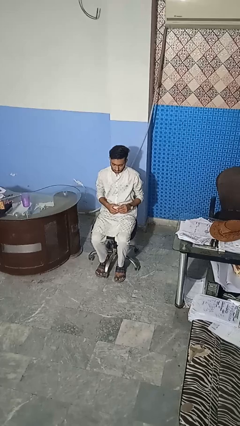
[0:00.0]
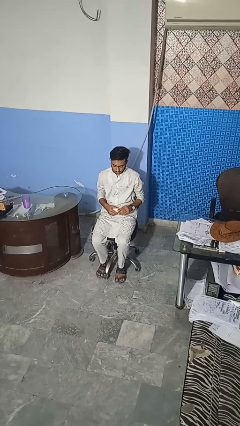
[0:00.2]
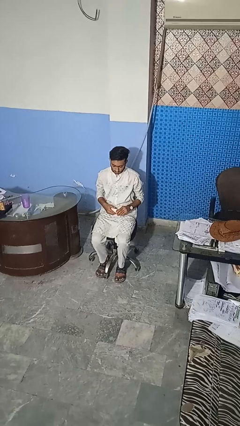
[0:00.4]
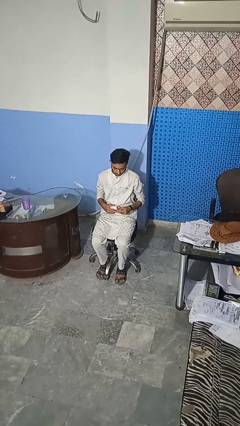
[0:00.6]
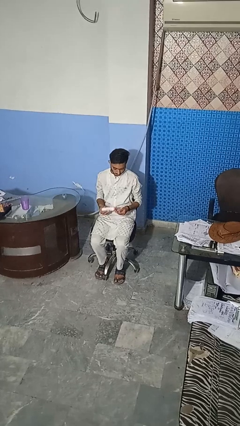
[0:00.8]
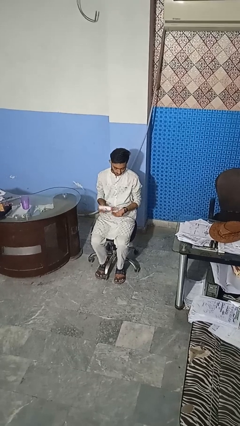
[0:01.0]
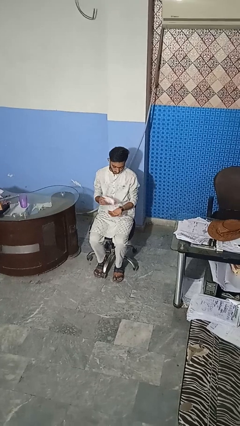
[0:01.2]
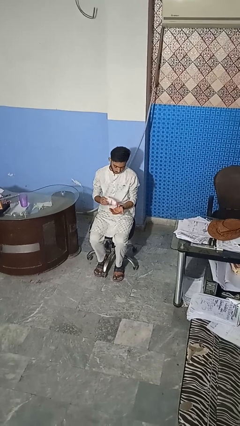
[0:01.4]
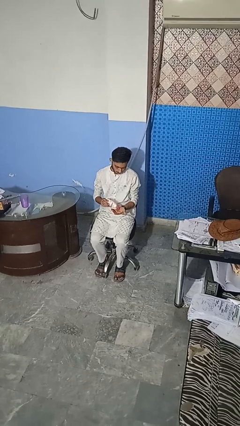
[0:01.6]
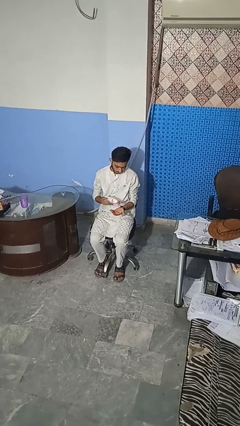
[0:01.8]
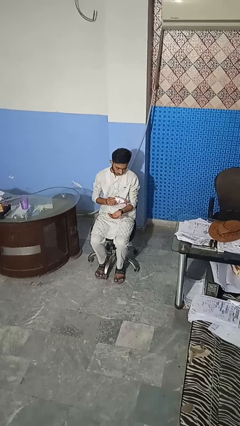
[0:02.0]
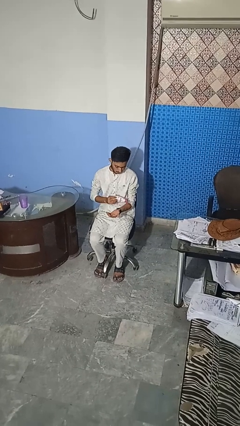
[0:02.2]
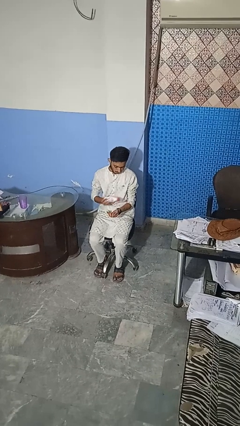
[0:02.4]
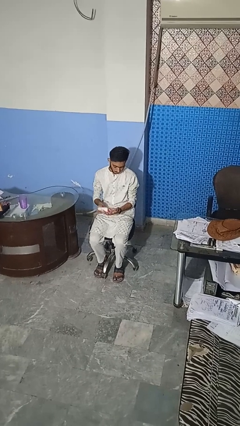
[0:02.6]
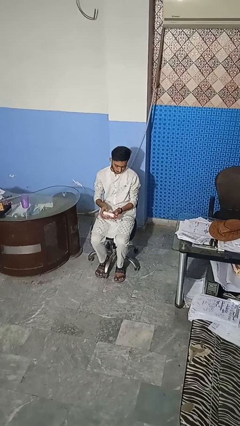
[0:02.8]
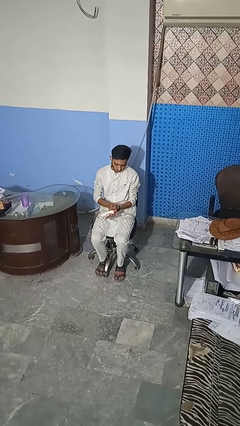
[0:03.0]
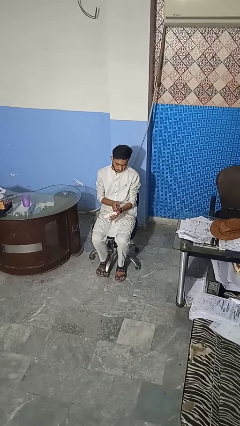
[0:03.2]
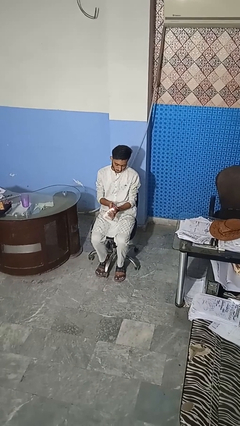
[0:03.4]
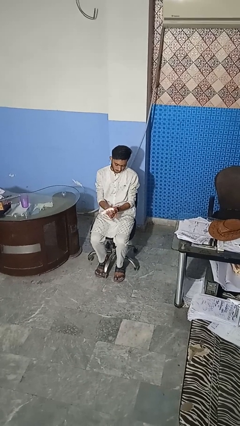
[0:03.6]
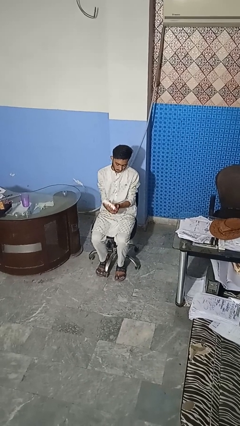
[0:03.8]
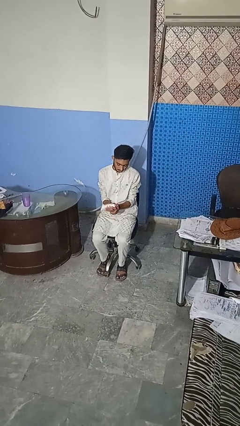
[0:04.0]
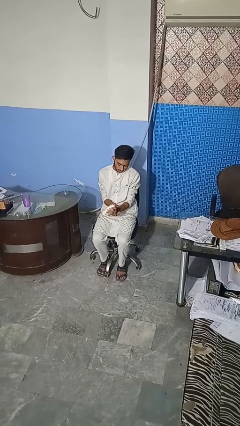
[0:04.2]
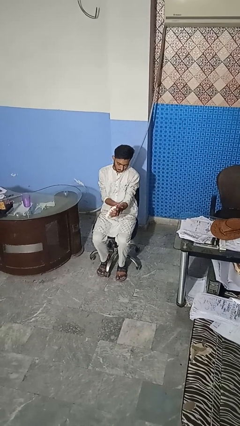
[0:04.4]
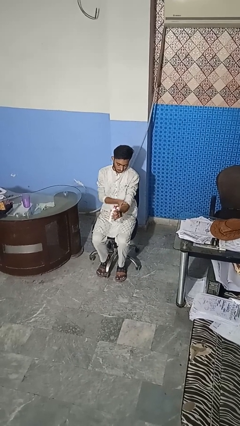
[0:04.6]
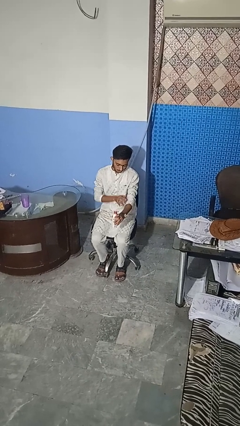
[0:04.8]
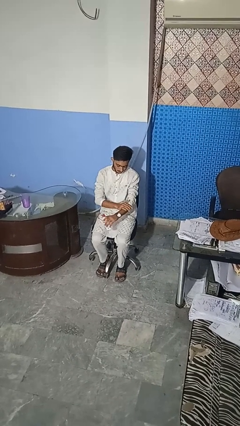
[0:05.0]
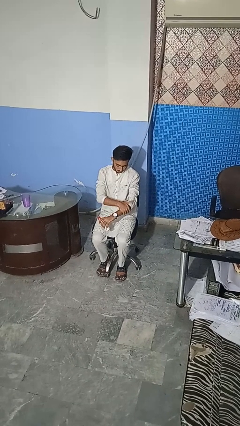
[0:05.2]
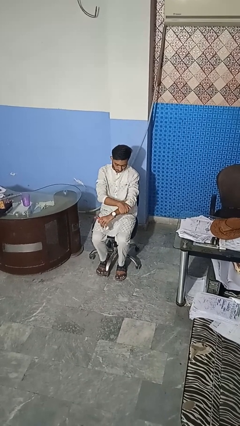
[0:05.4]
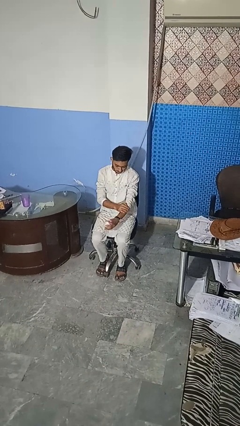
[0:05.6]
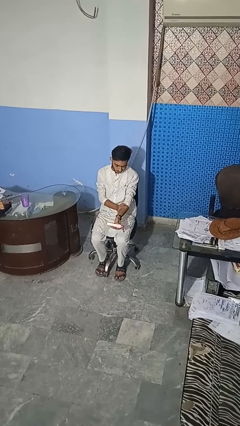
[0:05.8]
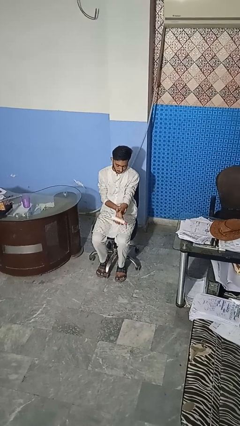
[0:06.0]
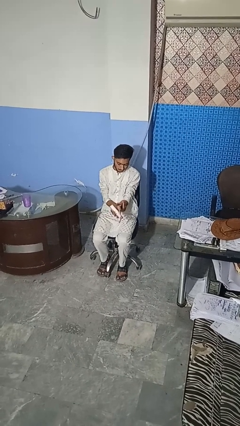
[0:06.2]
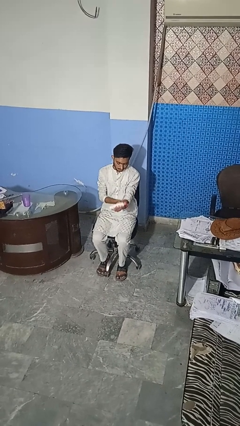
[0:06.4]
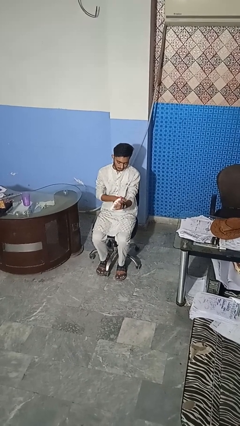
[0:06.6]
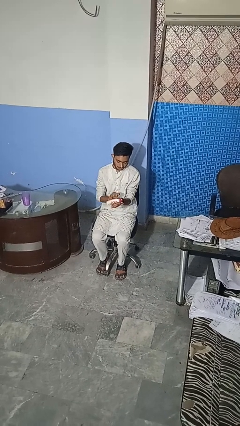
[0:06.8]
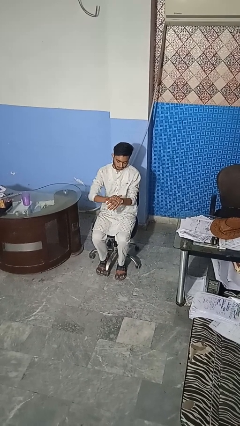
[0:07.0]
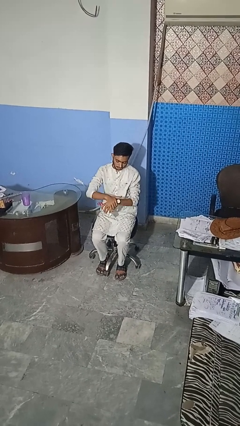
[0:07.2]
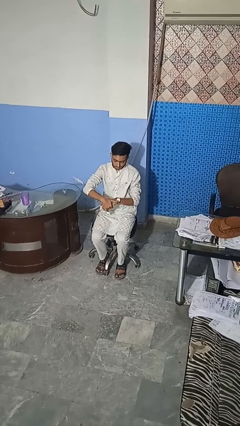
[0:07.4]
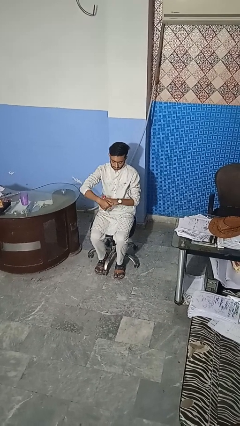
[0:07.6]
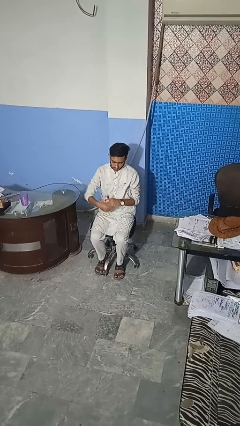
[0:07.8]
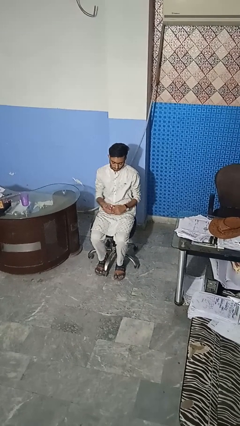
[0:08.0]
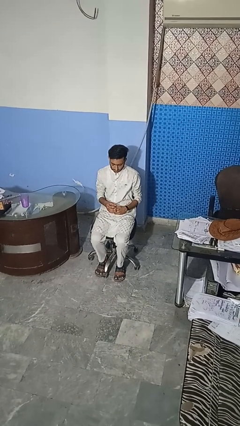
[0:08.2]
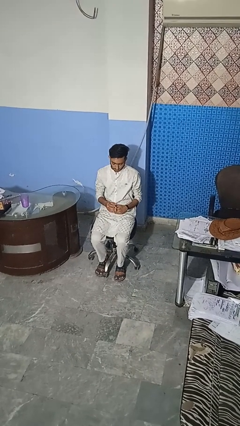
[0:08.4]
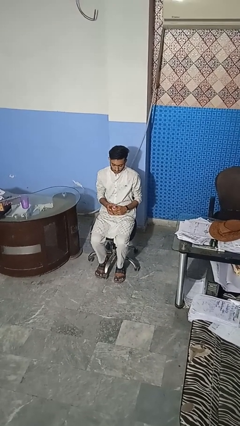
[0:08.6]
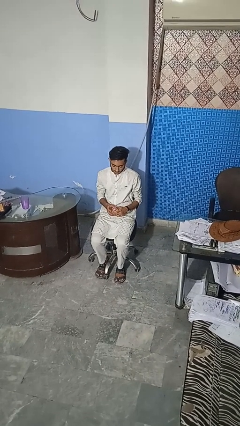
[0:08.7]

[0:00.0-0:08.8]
person applies sunscreen

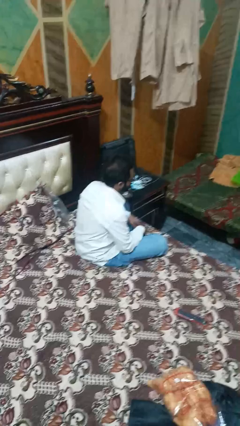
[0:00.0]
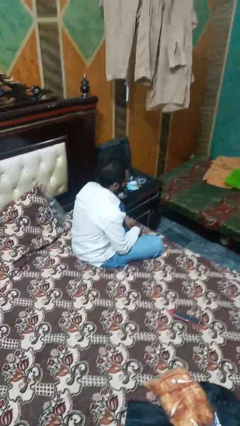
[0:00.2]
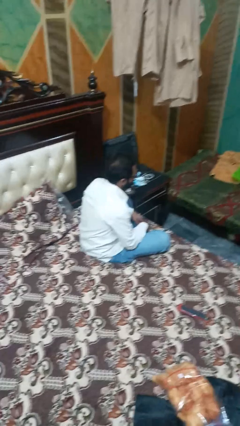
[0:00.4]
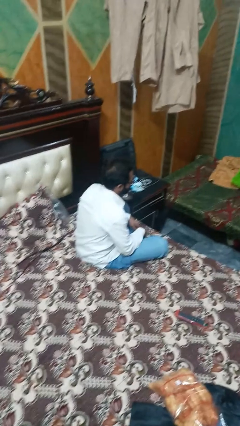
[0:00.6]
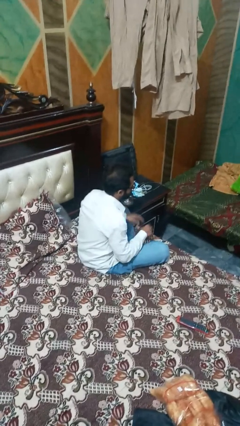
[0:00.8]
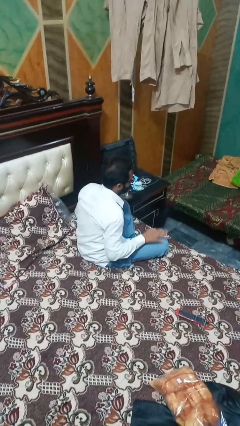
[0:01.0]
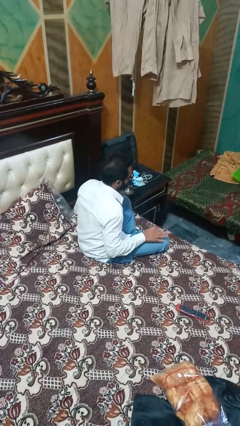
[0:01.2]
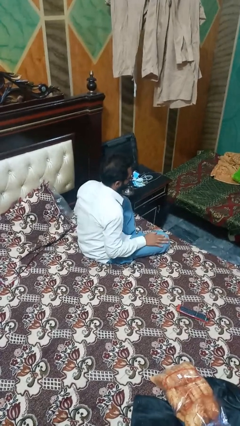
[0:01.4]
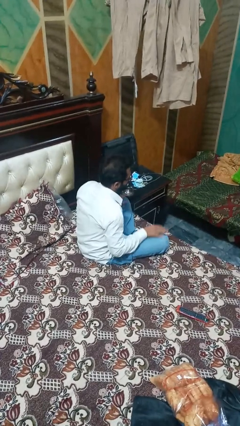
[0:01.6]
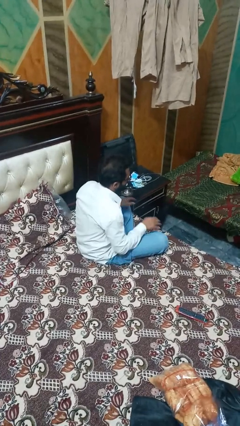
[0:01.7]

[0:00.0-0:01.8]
person slaps hands on thighs

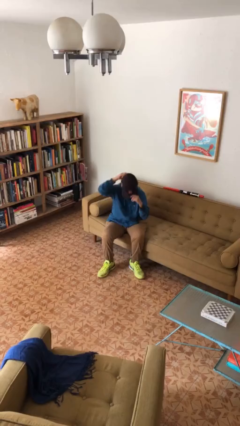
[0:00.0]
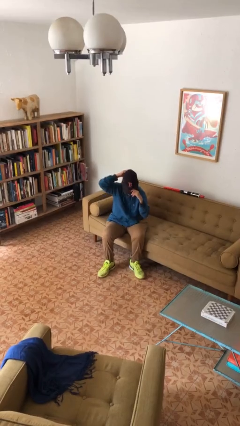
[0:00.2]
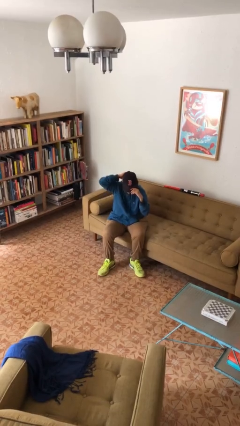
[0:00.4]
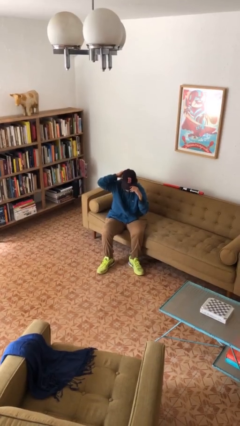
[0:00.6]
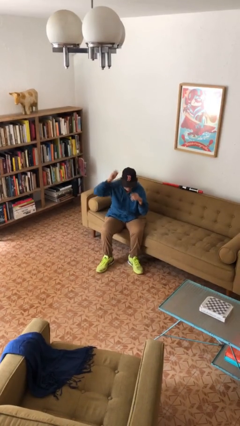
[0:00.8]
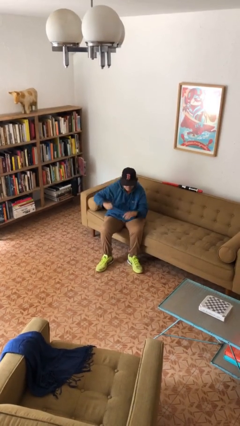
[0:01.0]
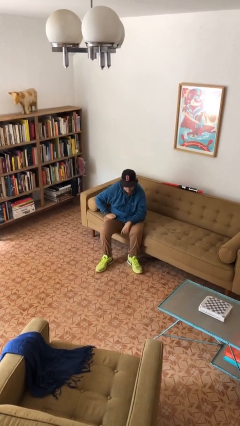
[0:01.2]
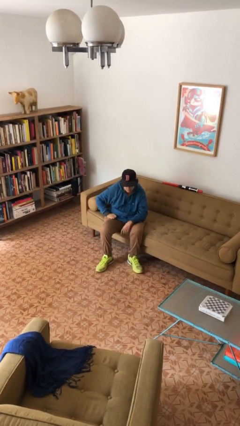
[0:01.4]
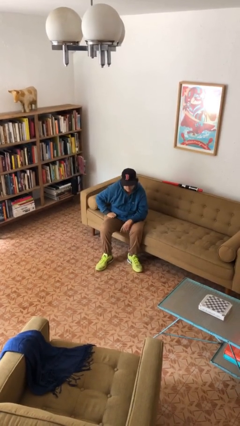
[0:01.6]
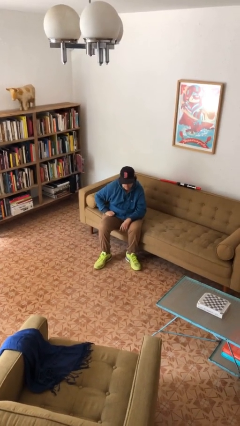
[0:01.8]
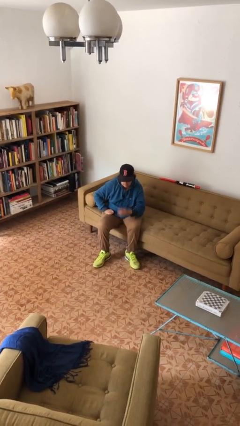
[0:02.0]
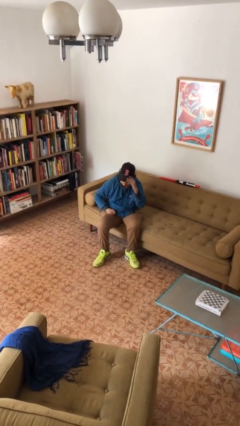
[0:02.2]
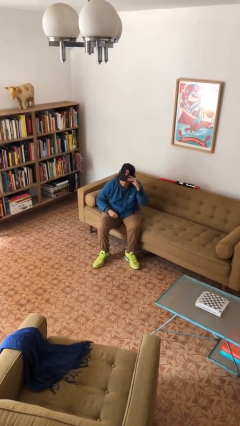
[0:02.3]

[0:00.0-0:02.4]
person puts on hat

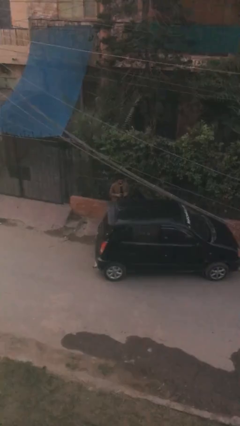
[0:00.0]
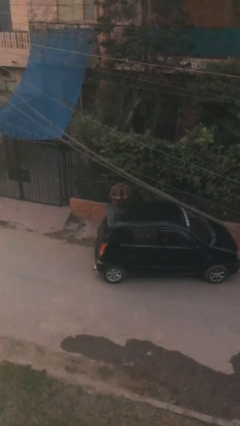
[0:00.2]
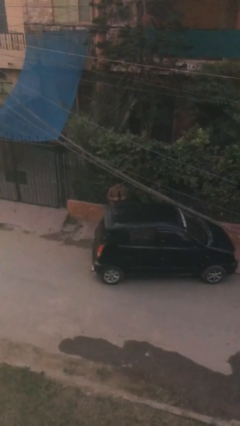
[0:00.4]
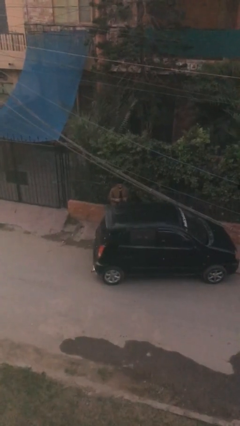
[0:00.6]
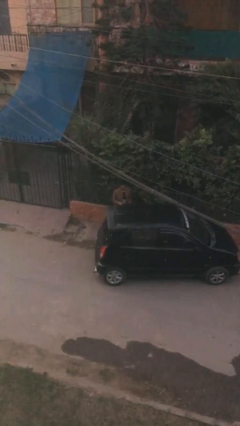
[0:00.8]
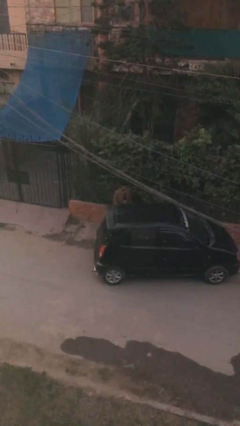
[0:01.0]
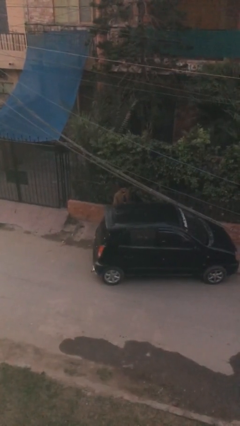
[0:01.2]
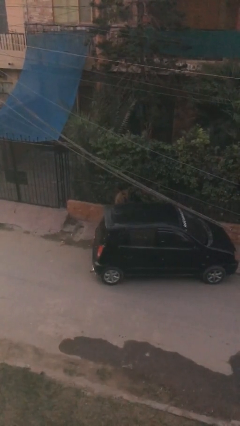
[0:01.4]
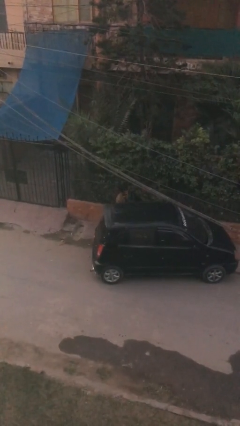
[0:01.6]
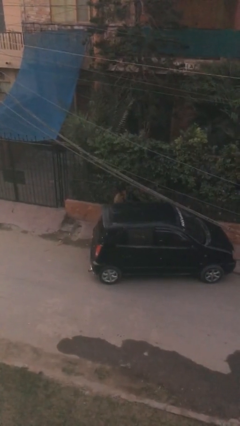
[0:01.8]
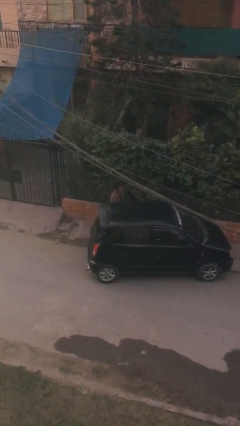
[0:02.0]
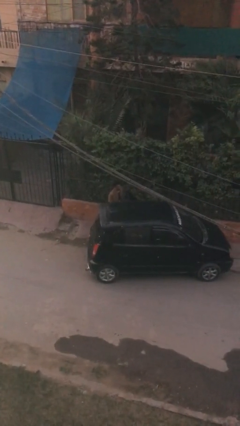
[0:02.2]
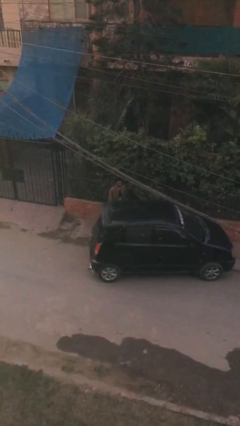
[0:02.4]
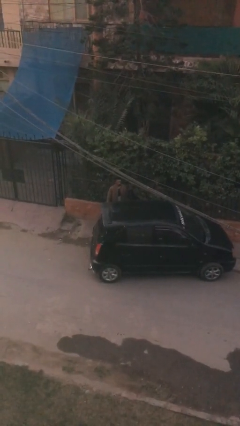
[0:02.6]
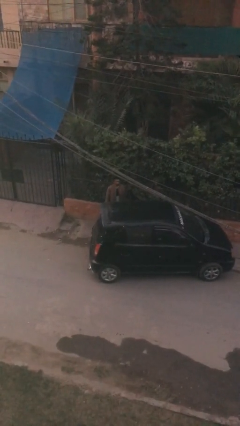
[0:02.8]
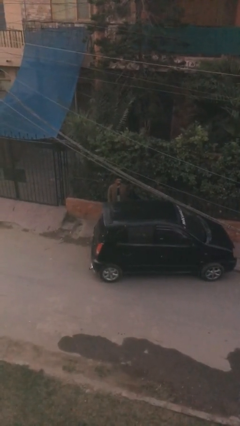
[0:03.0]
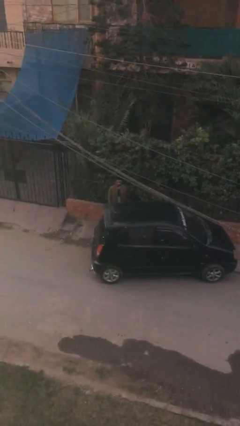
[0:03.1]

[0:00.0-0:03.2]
person loads car

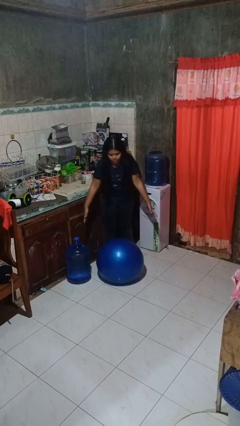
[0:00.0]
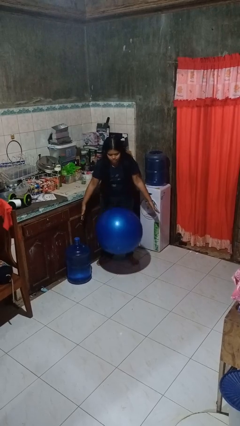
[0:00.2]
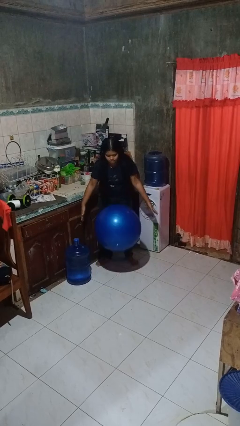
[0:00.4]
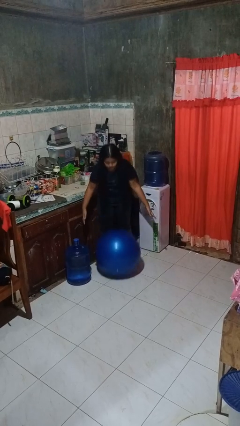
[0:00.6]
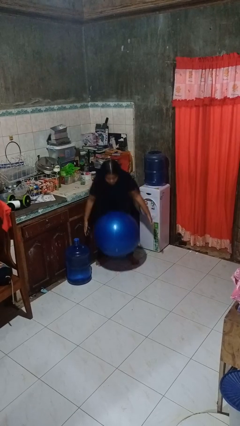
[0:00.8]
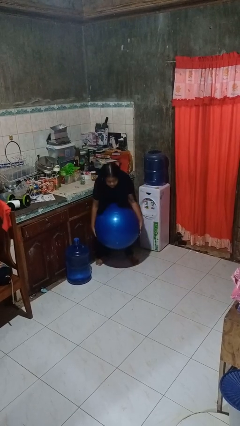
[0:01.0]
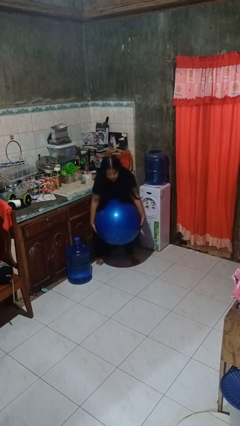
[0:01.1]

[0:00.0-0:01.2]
person bounces ball on floor

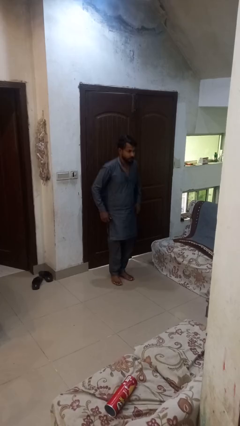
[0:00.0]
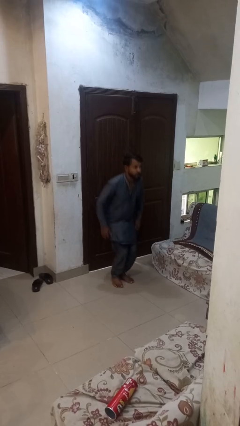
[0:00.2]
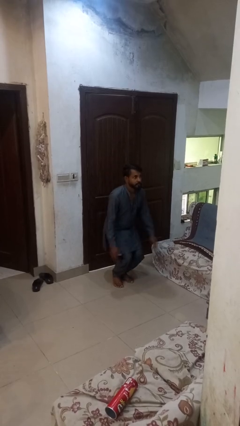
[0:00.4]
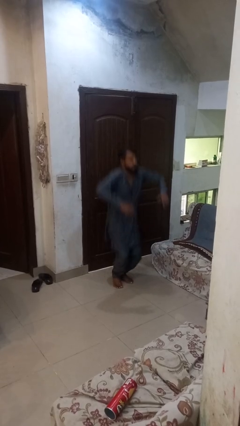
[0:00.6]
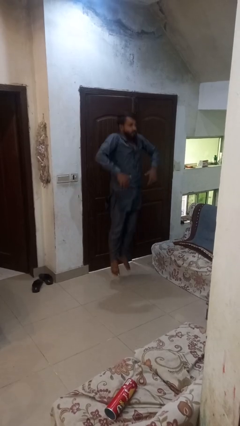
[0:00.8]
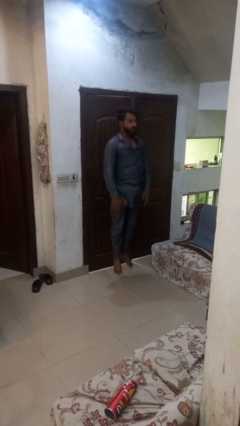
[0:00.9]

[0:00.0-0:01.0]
person jumps
